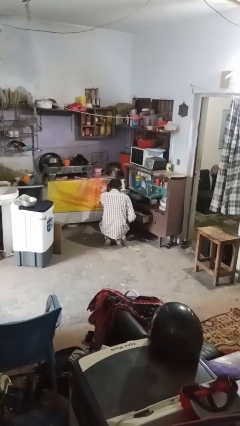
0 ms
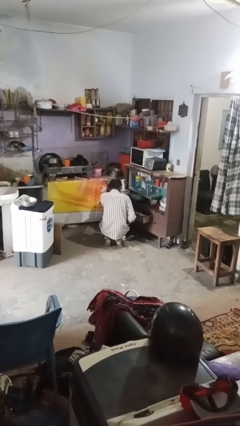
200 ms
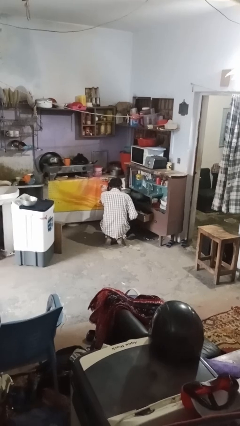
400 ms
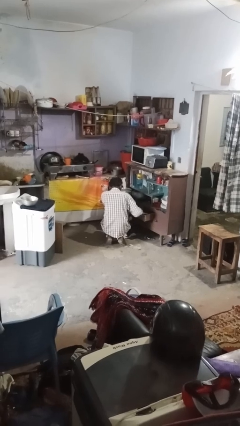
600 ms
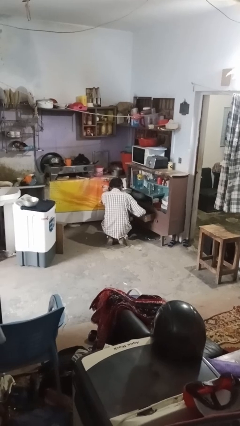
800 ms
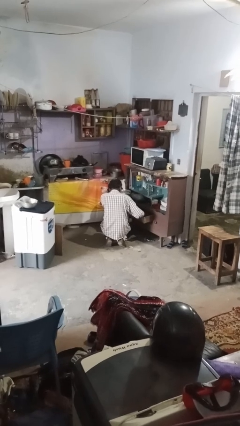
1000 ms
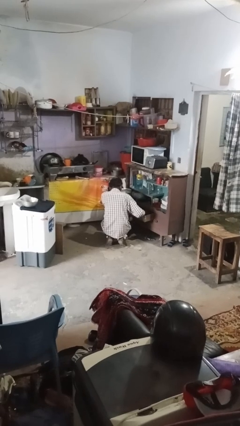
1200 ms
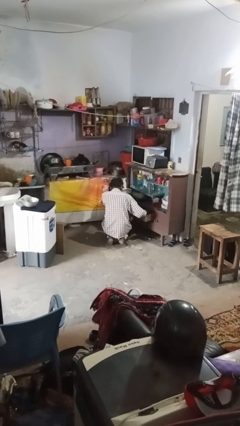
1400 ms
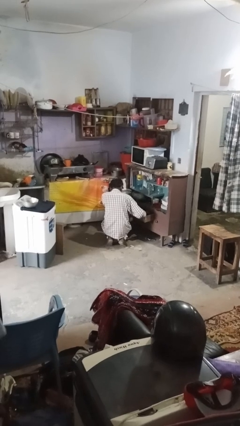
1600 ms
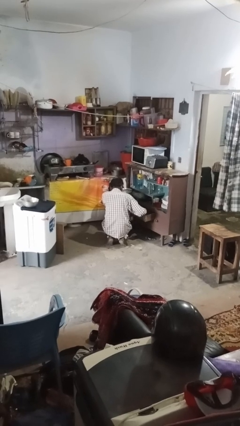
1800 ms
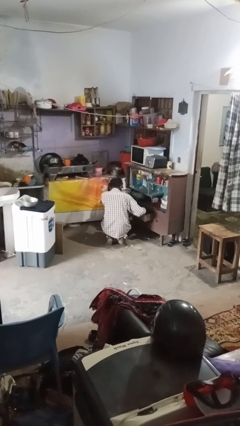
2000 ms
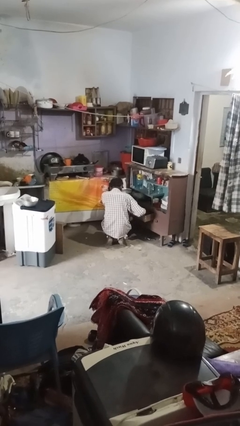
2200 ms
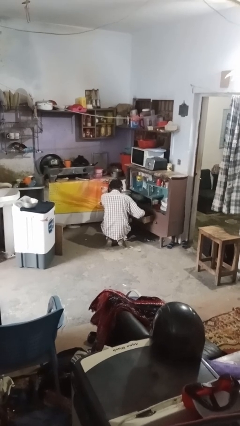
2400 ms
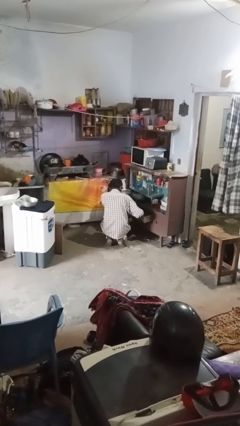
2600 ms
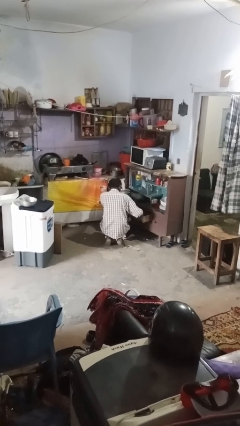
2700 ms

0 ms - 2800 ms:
person searches in kitchen drawer

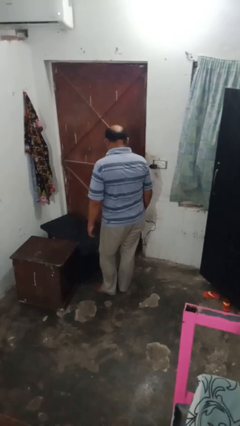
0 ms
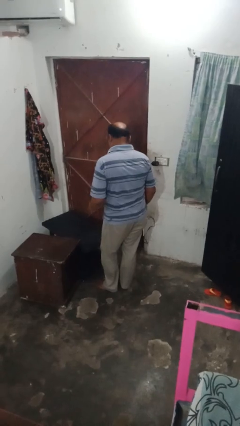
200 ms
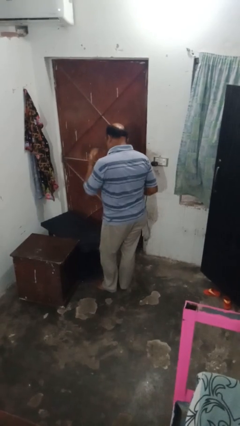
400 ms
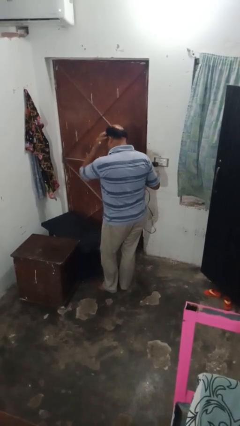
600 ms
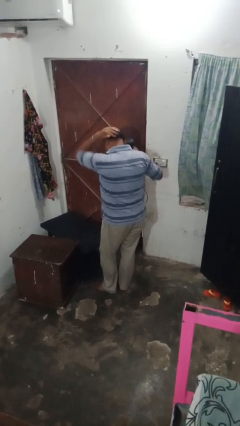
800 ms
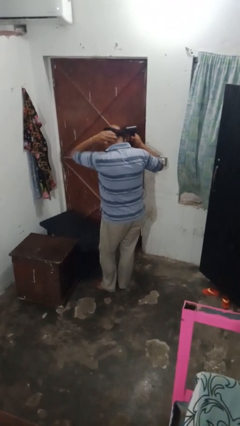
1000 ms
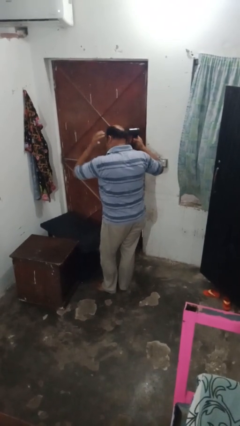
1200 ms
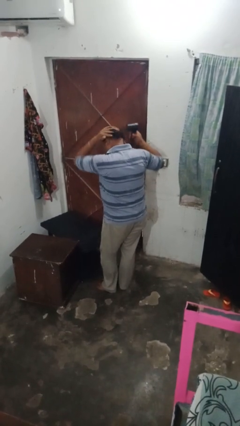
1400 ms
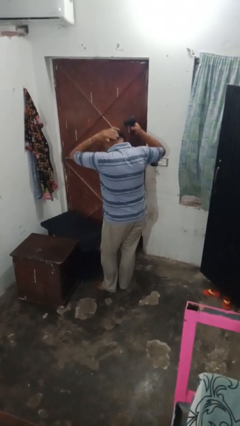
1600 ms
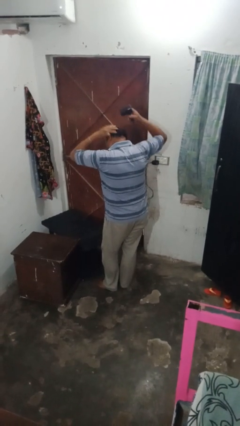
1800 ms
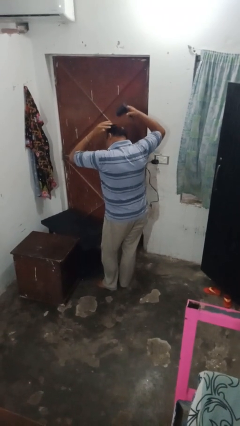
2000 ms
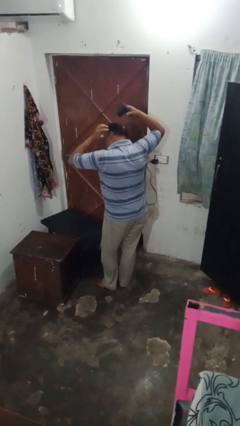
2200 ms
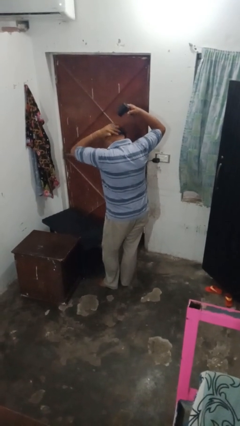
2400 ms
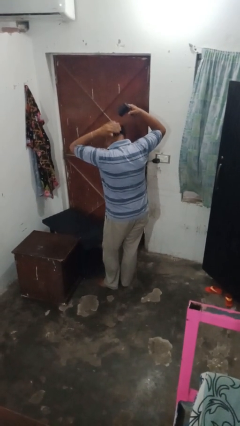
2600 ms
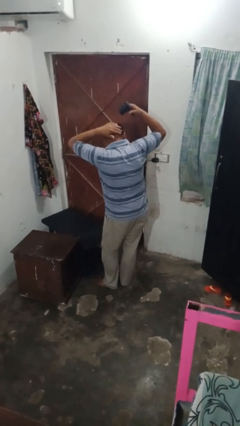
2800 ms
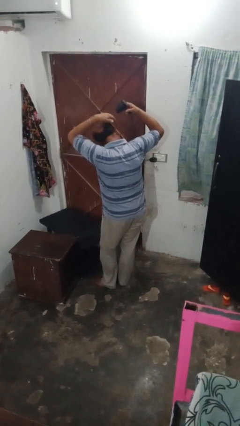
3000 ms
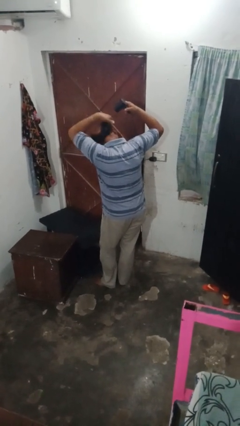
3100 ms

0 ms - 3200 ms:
person dries hair with towel

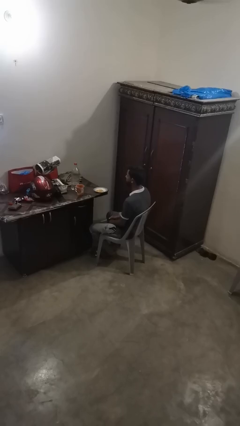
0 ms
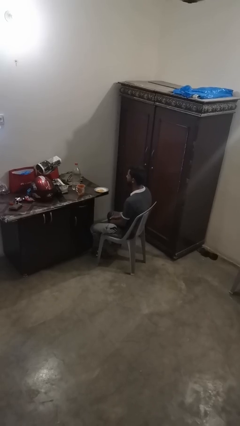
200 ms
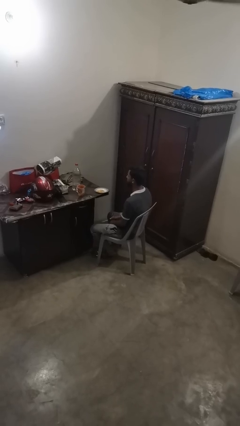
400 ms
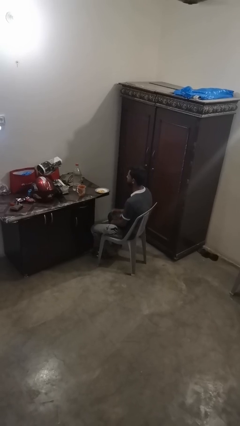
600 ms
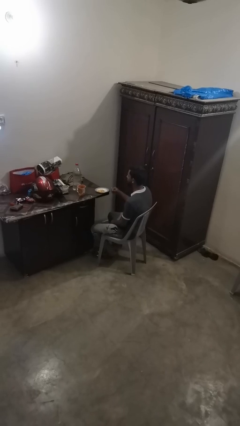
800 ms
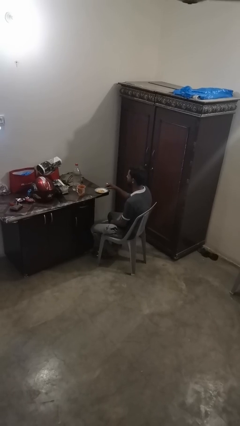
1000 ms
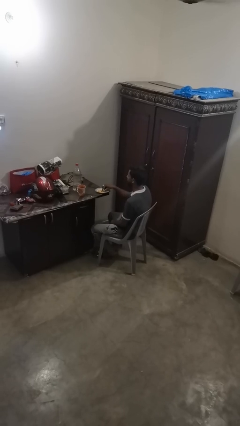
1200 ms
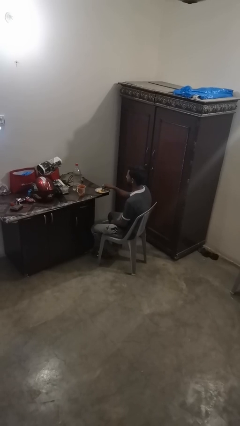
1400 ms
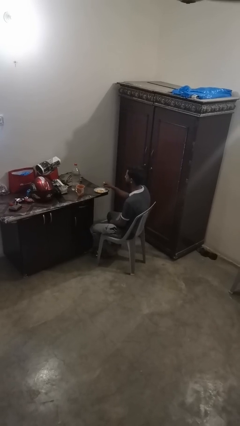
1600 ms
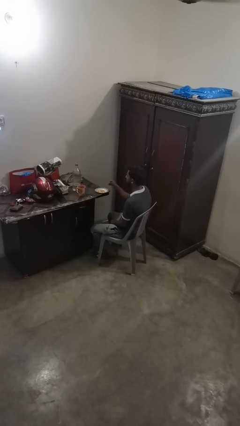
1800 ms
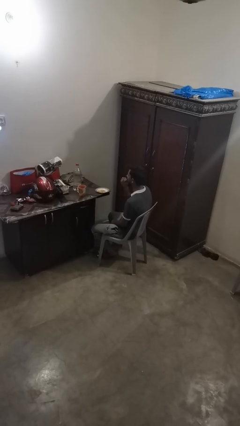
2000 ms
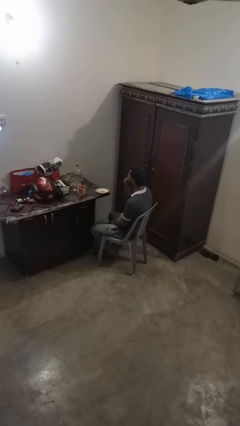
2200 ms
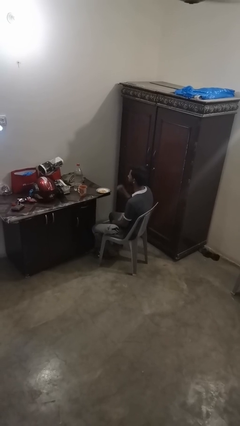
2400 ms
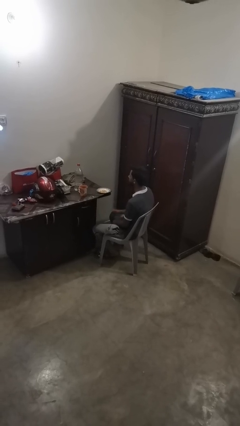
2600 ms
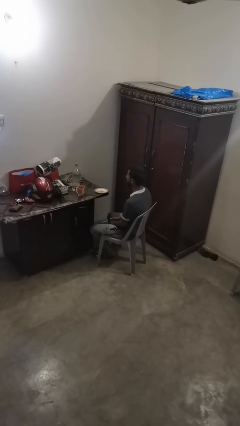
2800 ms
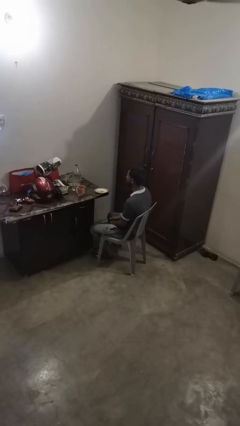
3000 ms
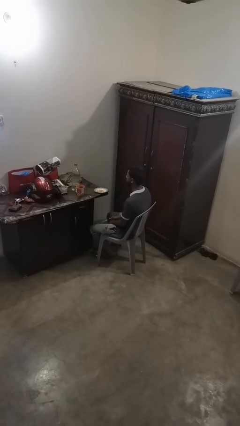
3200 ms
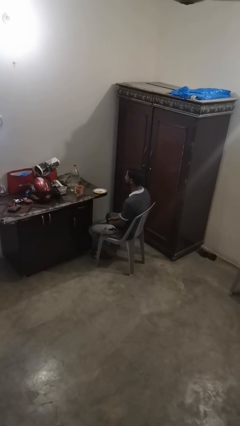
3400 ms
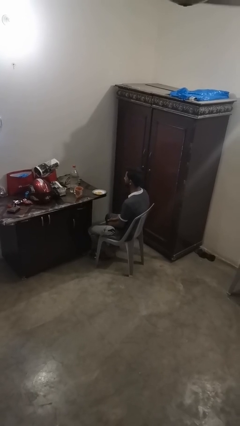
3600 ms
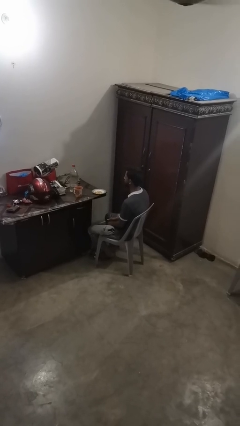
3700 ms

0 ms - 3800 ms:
person eats with hands

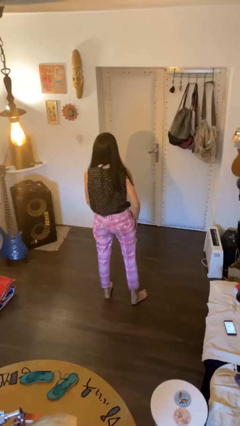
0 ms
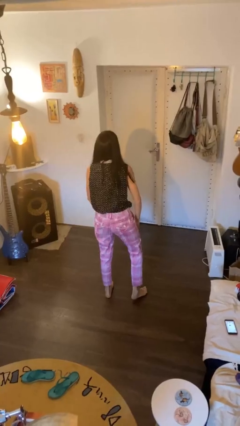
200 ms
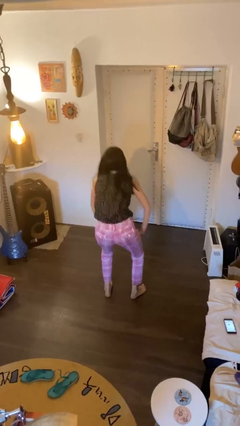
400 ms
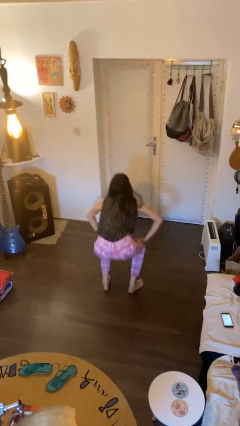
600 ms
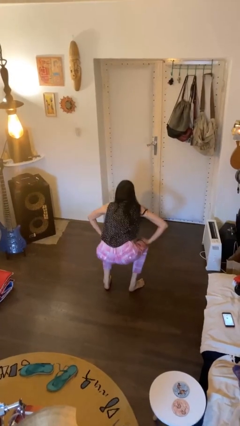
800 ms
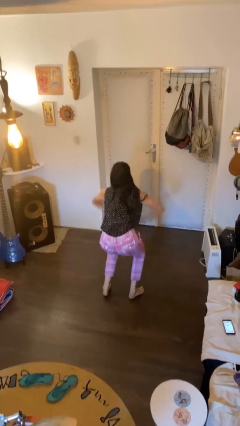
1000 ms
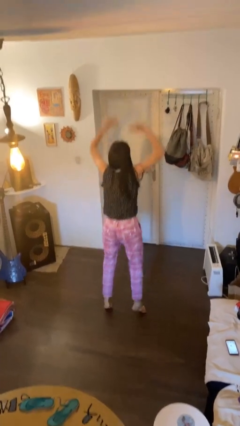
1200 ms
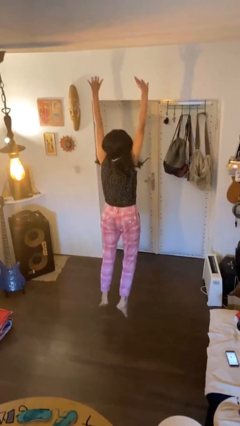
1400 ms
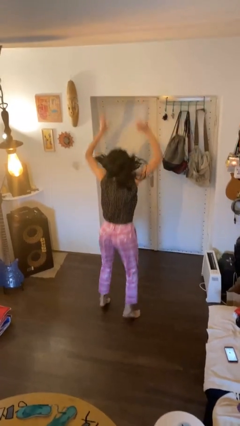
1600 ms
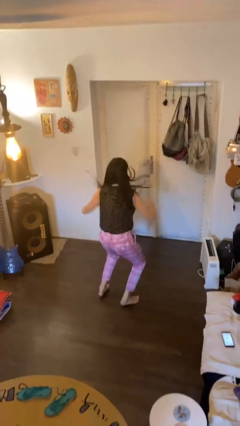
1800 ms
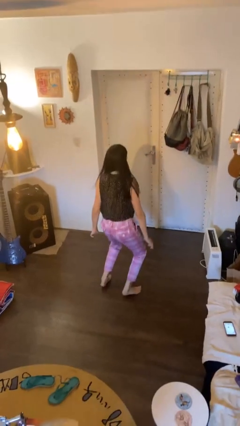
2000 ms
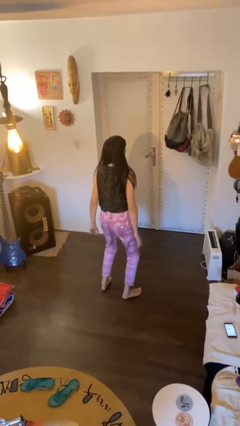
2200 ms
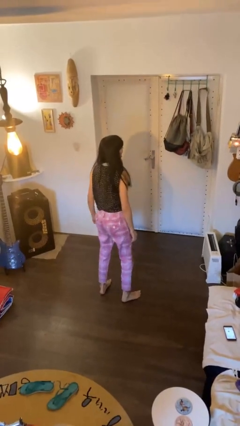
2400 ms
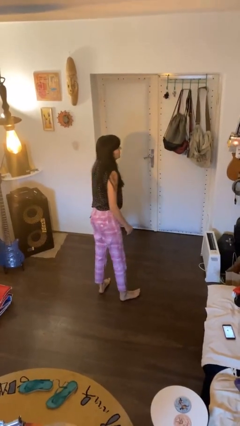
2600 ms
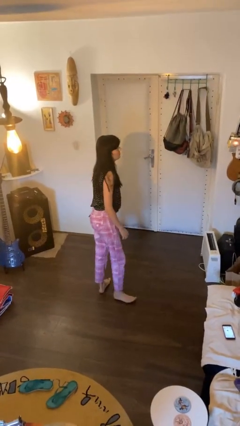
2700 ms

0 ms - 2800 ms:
person jumps

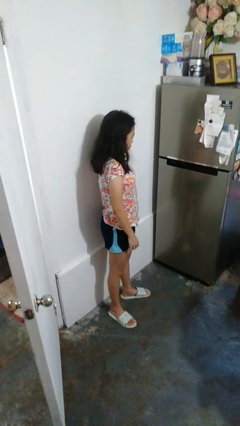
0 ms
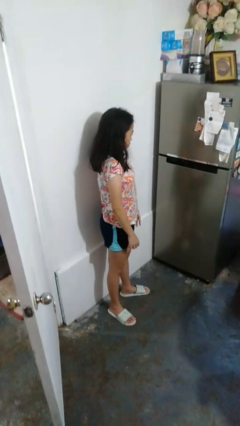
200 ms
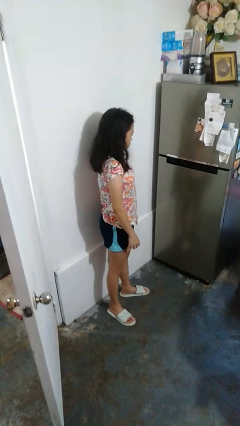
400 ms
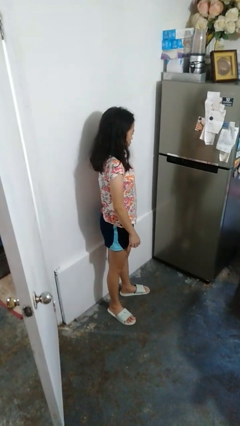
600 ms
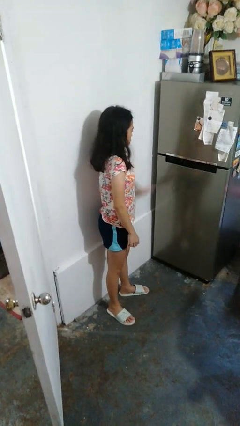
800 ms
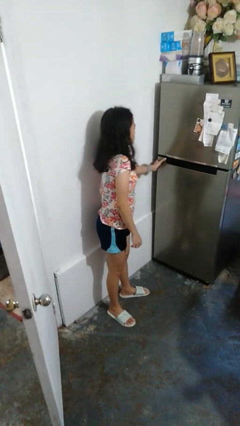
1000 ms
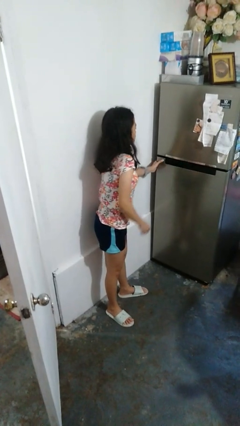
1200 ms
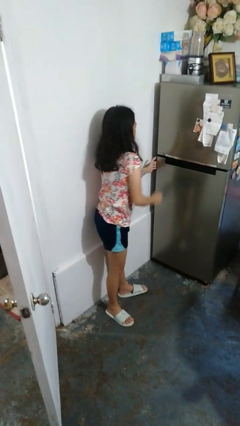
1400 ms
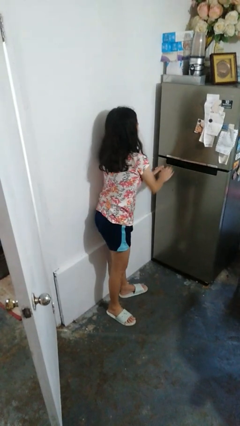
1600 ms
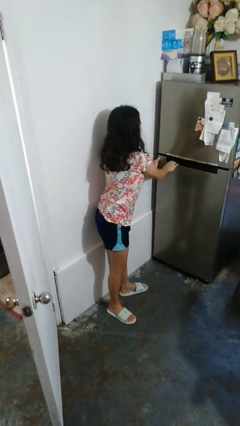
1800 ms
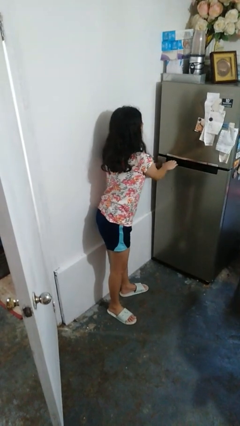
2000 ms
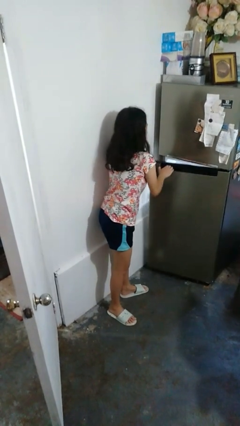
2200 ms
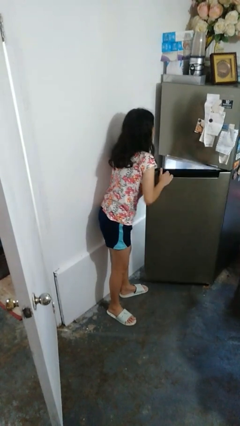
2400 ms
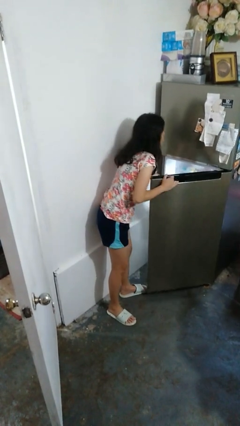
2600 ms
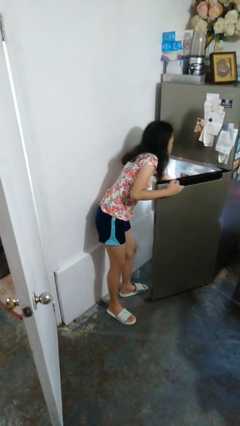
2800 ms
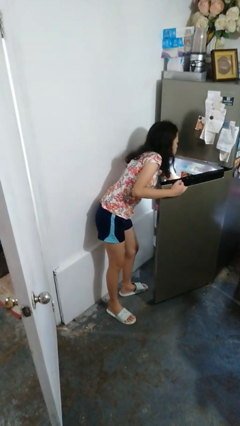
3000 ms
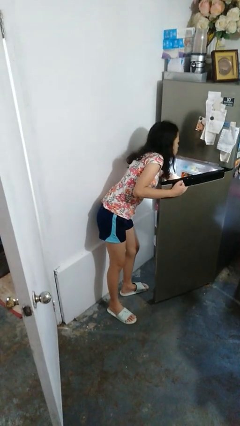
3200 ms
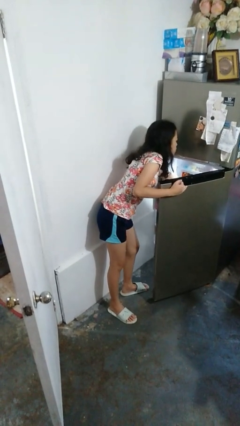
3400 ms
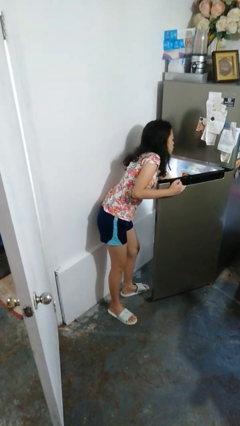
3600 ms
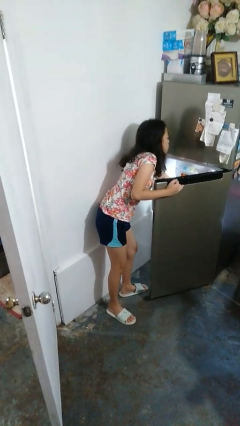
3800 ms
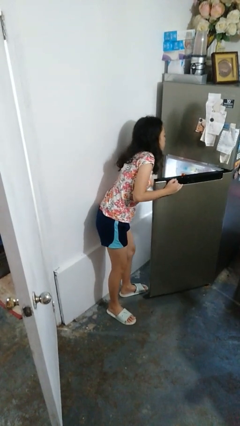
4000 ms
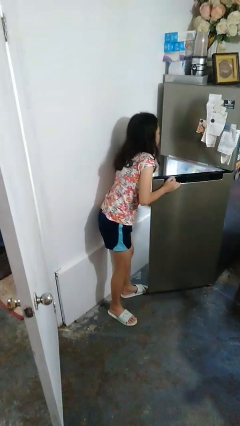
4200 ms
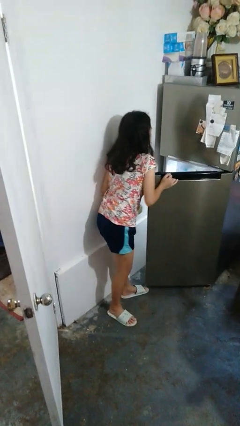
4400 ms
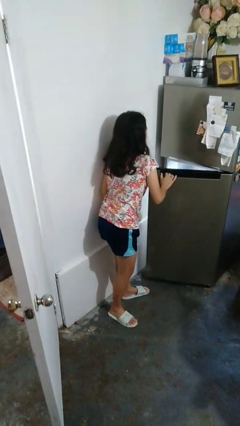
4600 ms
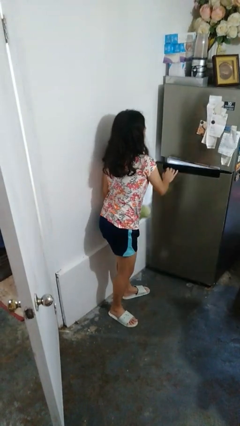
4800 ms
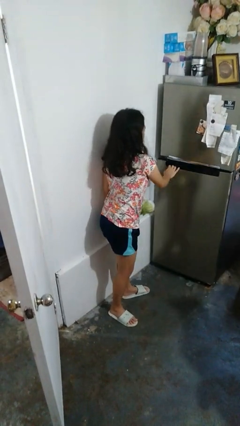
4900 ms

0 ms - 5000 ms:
person takes object from refrigerator
